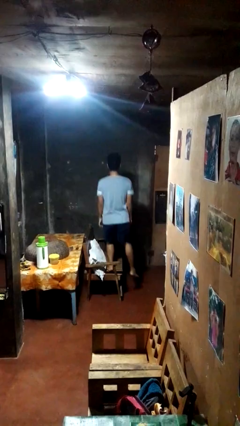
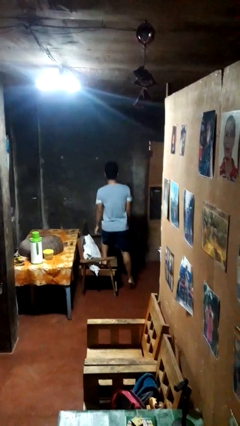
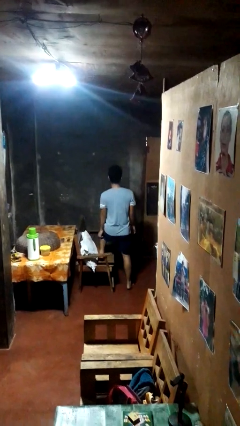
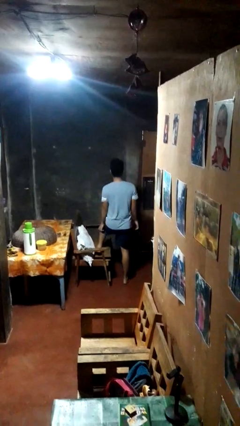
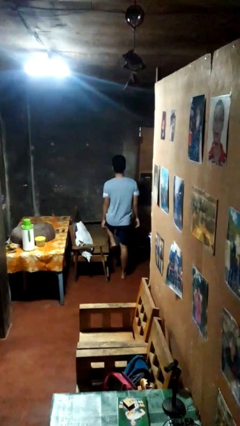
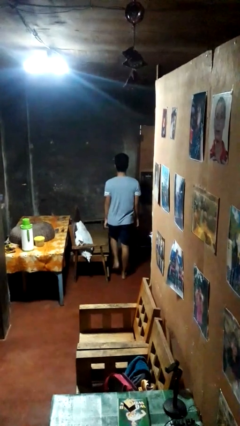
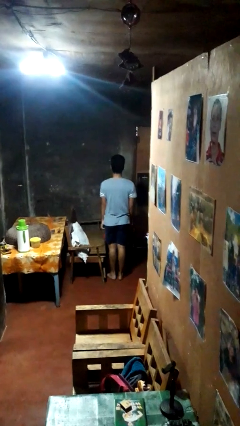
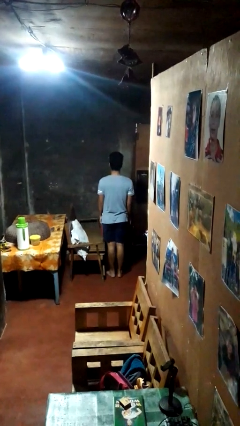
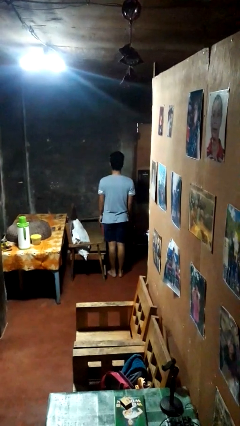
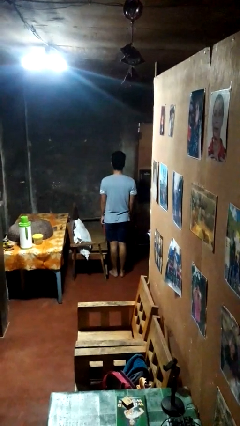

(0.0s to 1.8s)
person climbs off couch

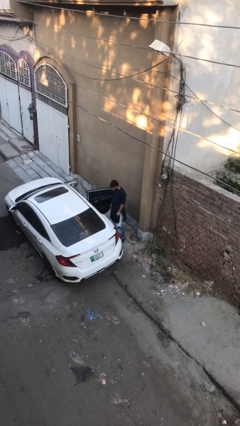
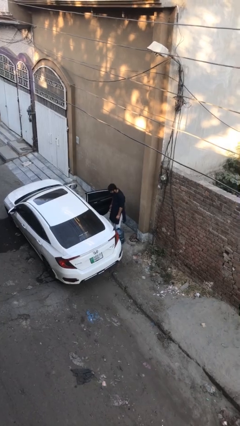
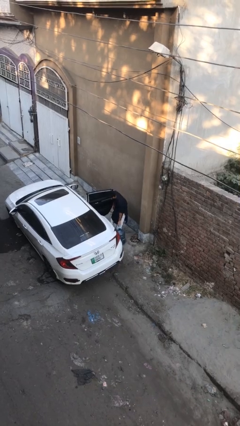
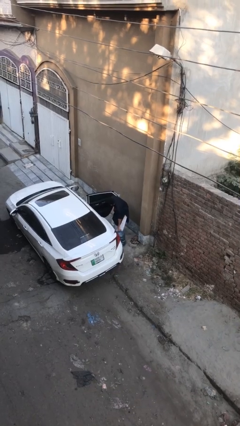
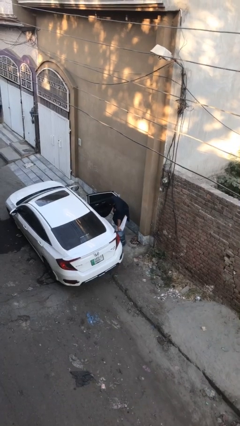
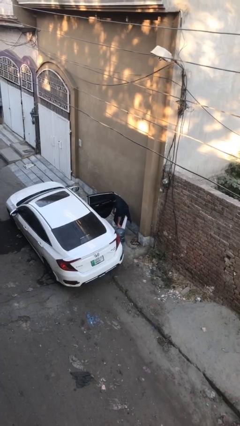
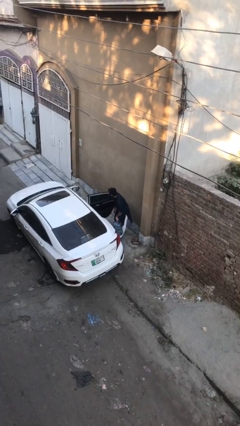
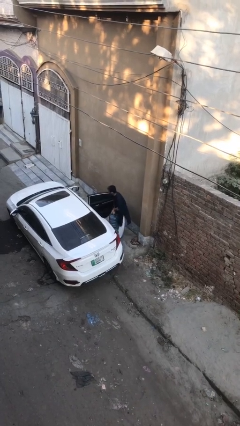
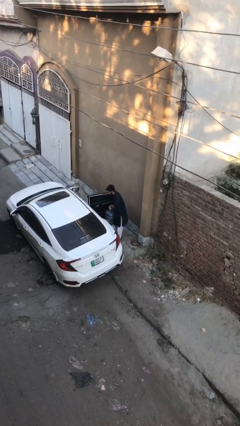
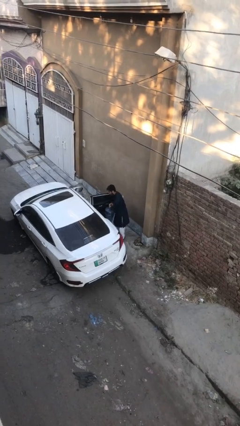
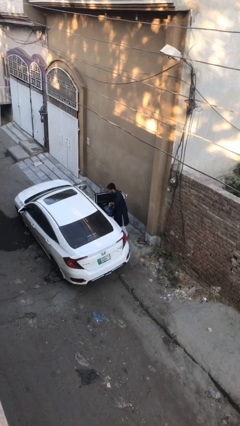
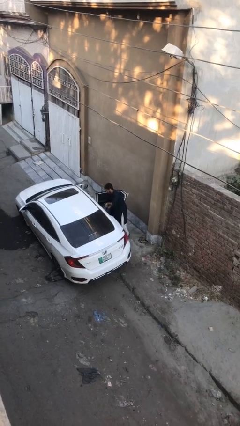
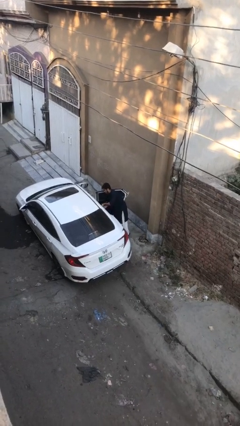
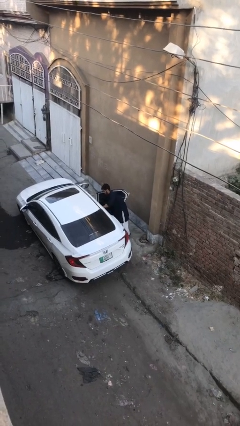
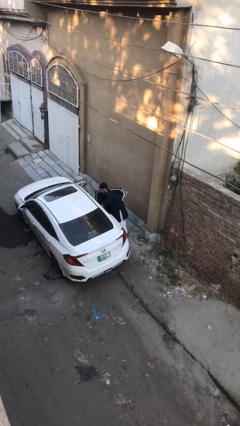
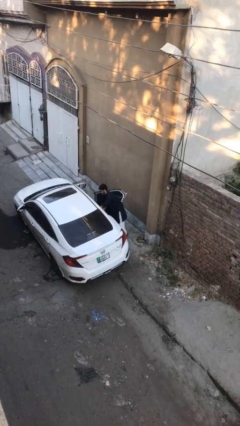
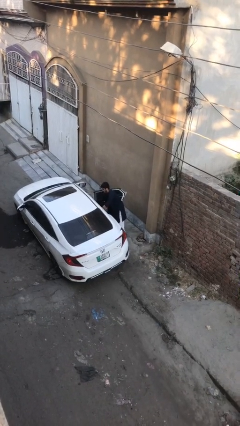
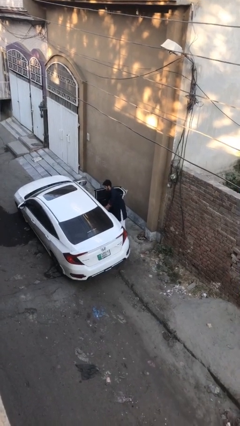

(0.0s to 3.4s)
person loads car

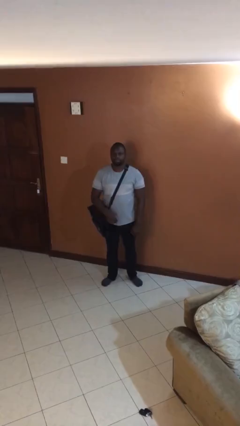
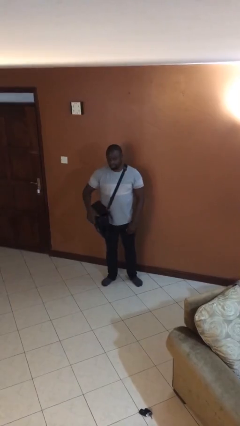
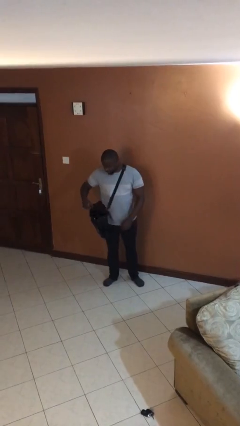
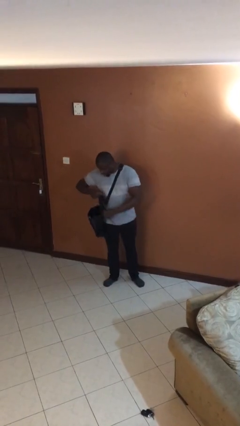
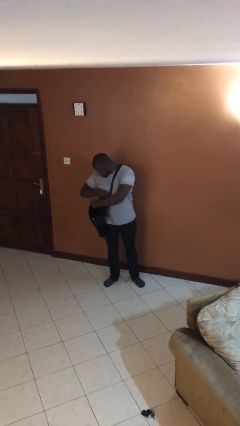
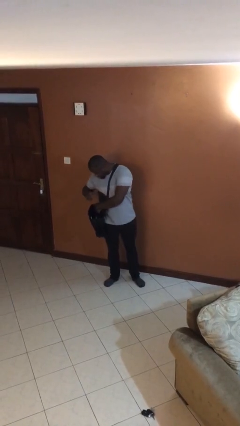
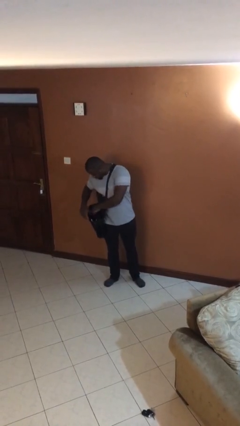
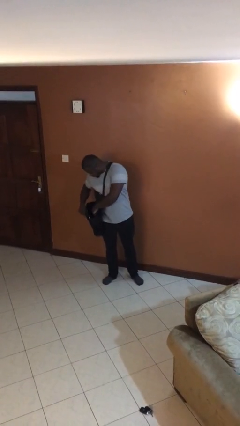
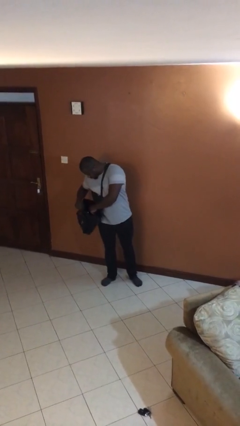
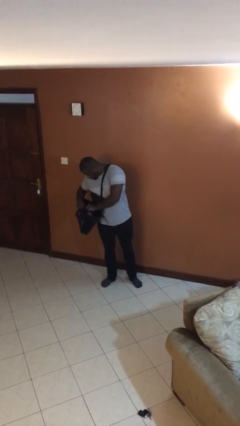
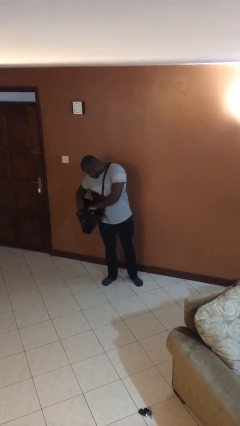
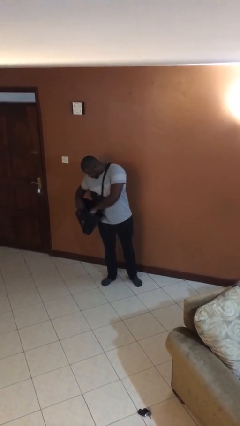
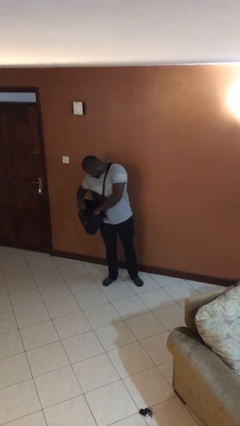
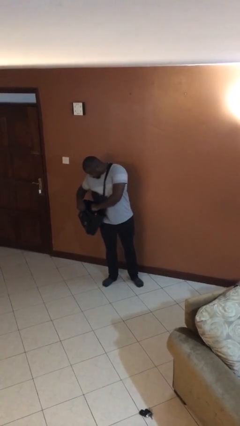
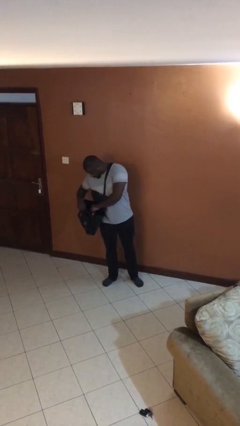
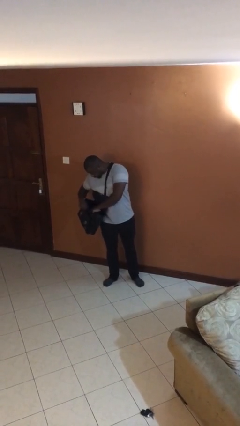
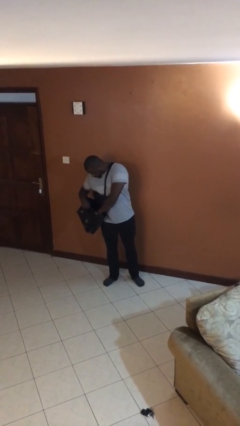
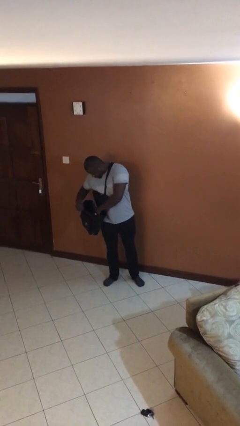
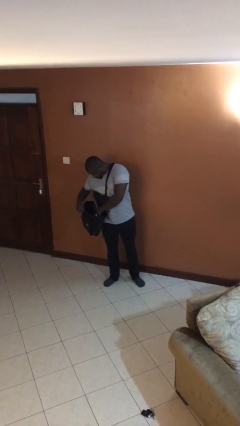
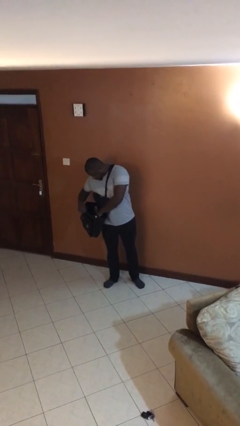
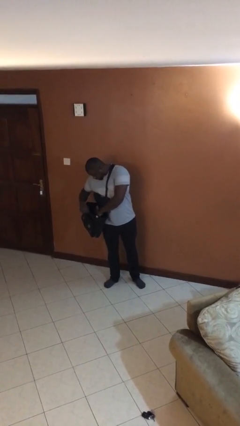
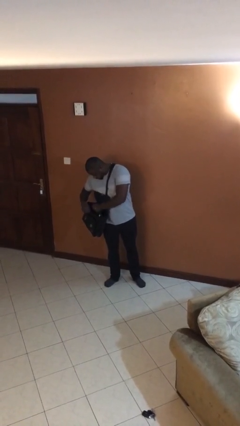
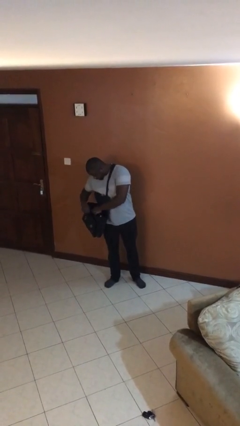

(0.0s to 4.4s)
person searches in purse

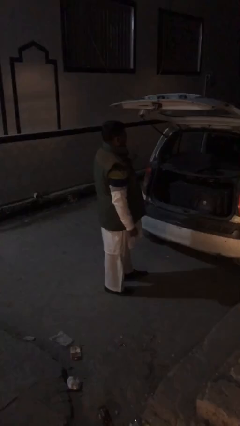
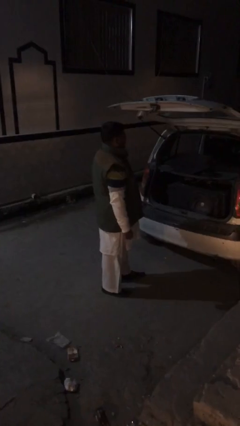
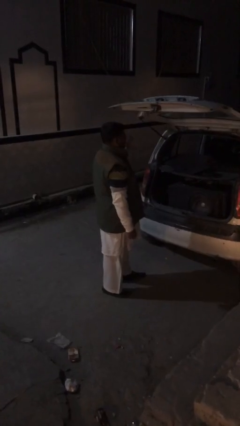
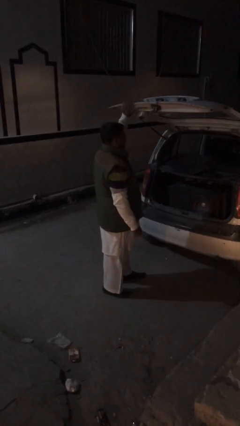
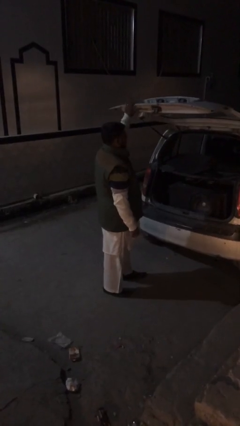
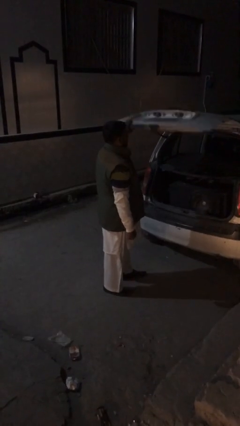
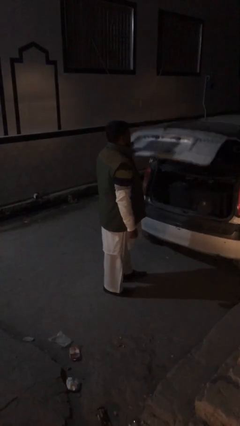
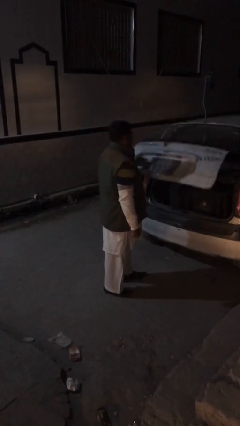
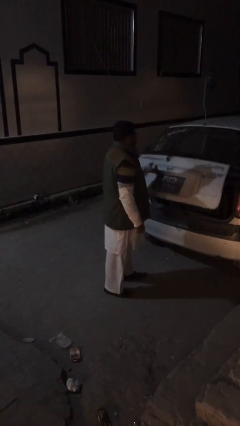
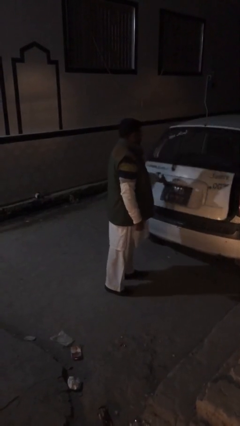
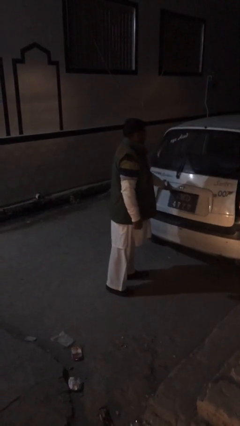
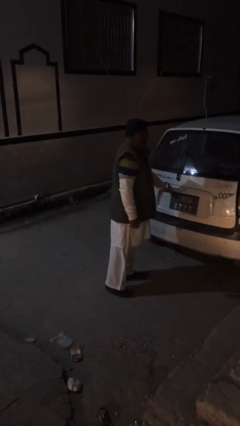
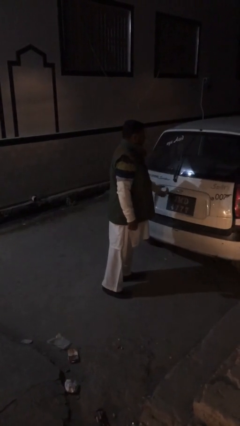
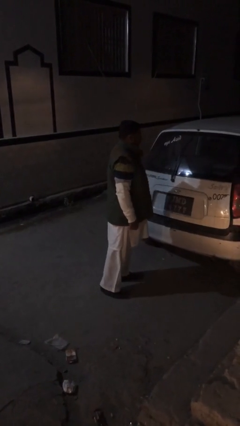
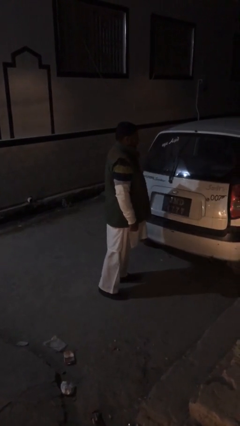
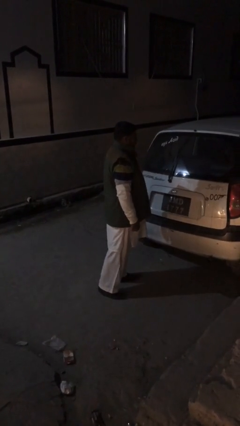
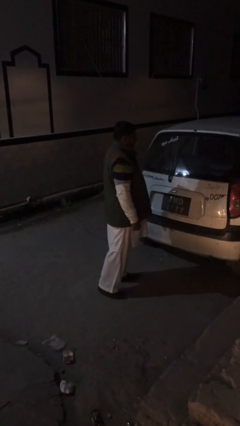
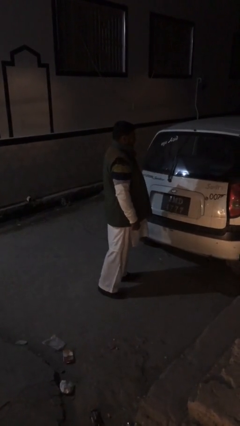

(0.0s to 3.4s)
person closes car trunk

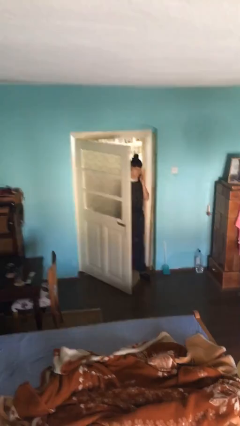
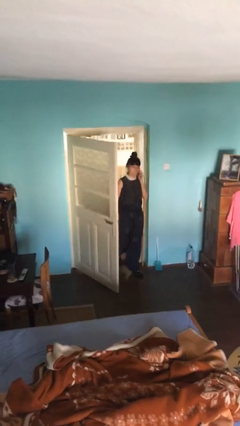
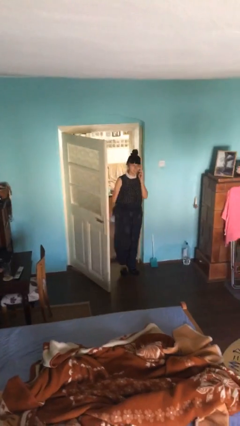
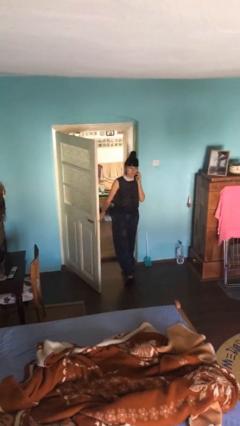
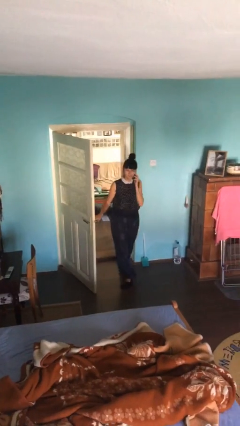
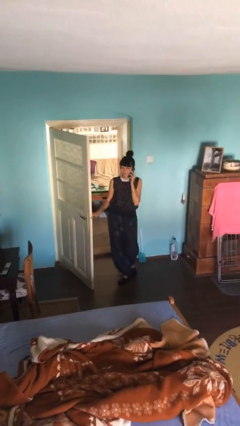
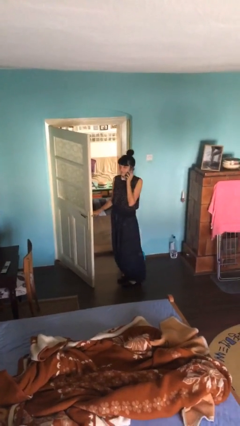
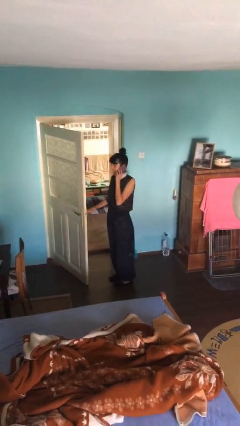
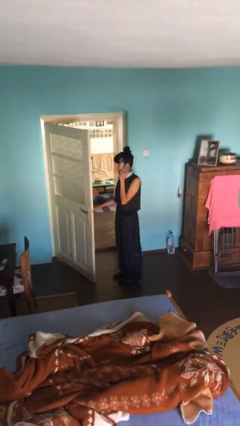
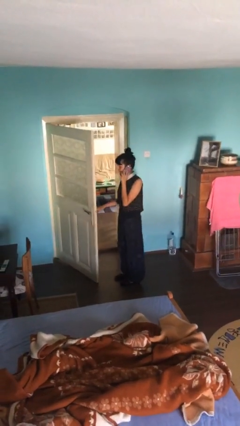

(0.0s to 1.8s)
person enters scene through structure

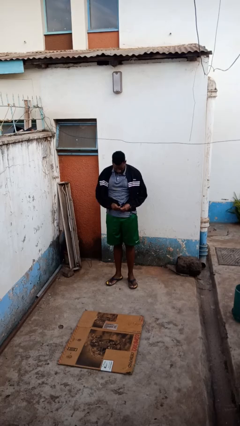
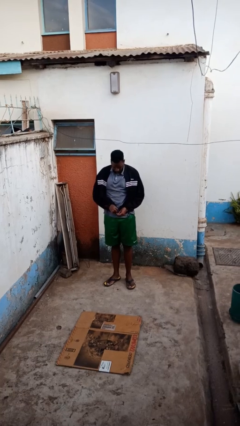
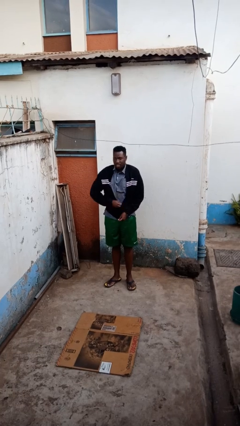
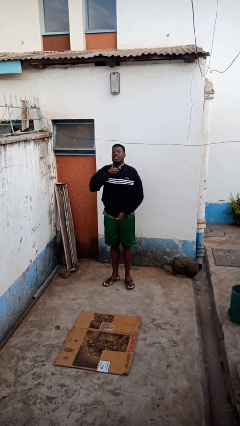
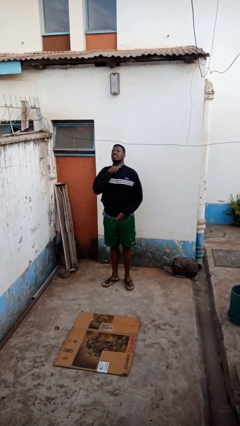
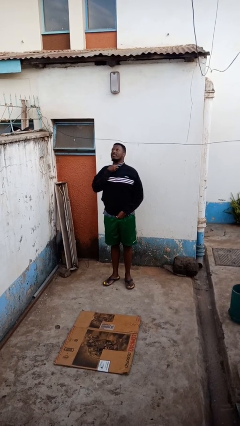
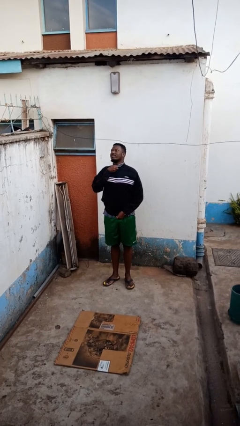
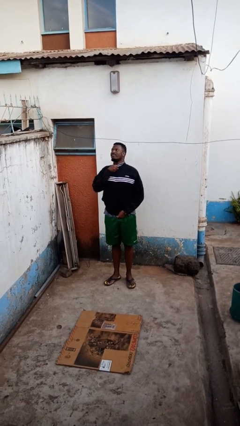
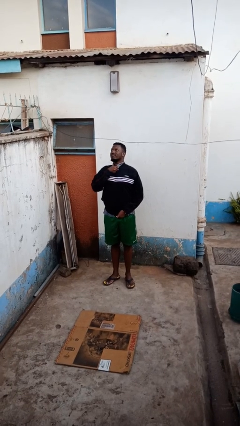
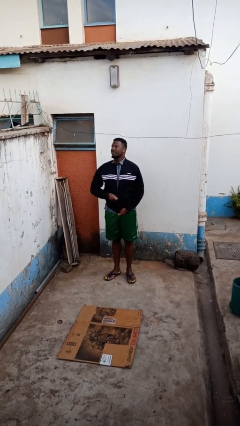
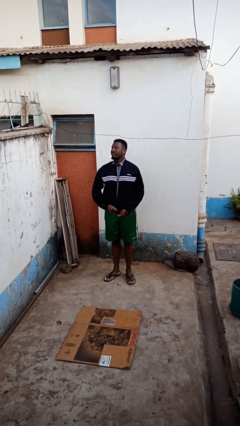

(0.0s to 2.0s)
person zips up jacket

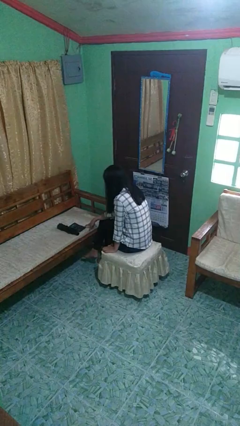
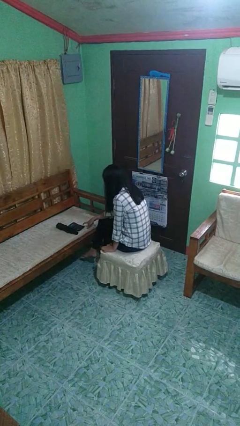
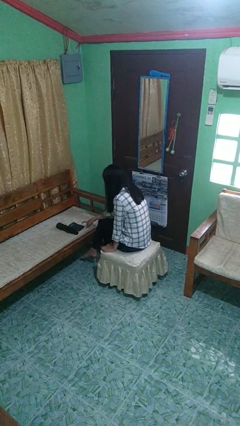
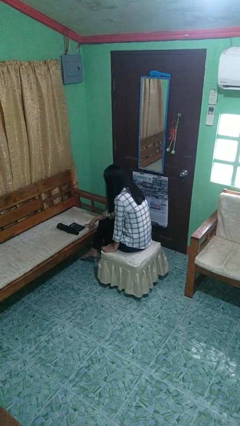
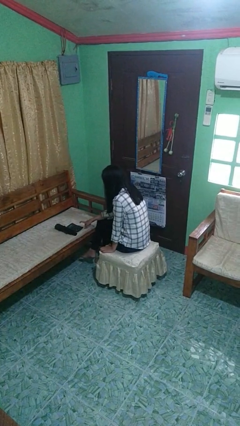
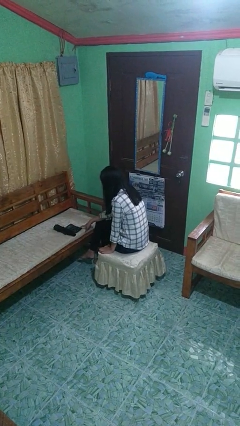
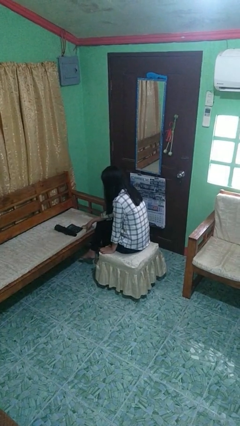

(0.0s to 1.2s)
person taps object with finger
